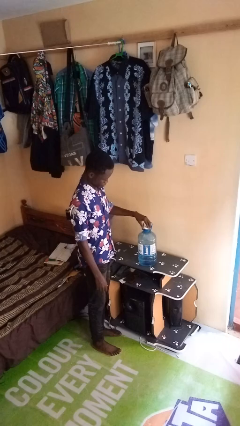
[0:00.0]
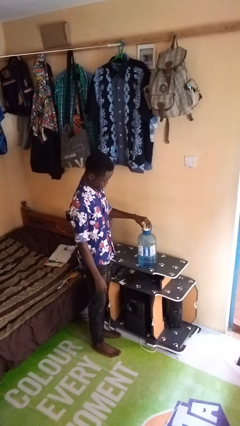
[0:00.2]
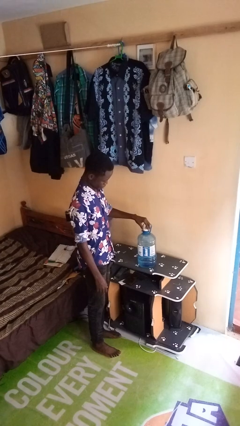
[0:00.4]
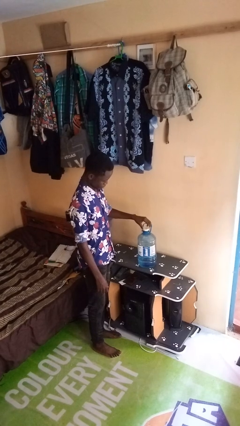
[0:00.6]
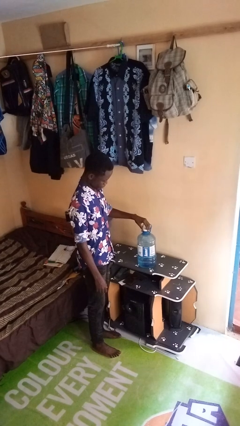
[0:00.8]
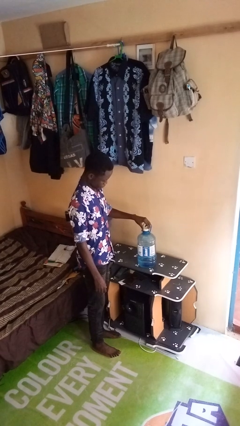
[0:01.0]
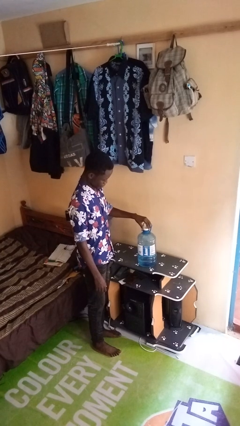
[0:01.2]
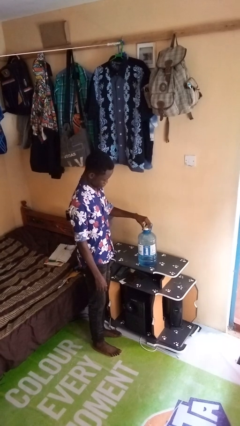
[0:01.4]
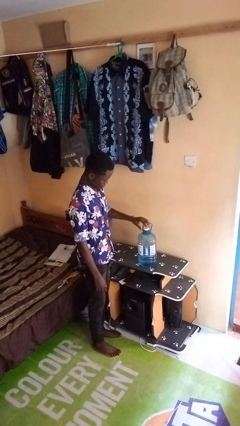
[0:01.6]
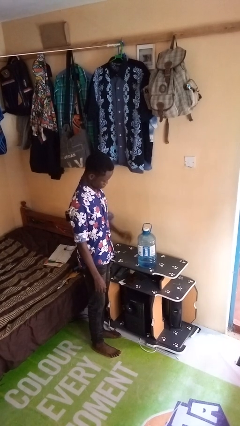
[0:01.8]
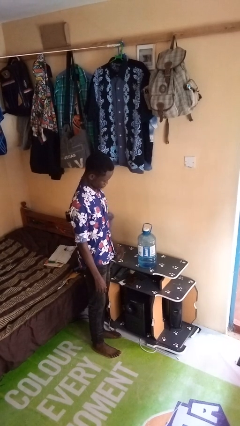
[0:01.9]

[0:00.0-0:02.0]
person screws lid to bottle

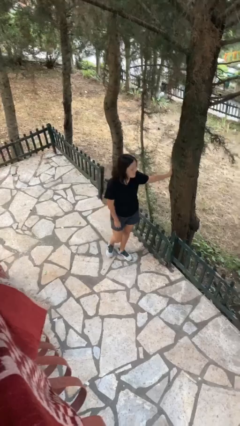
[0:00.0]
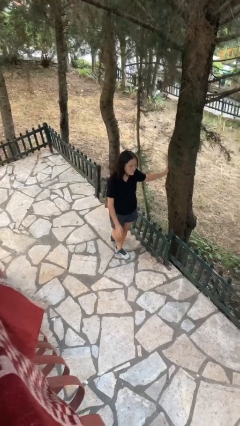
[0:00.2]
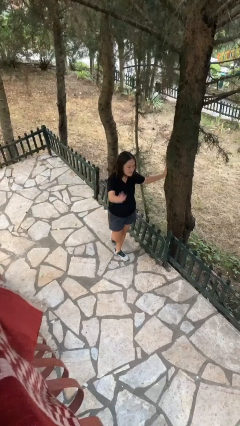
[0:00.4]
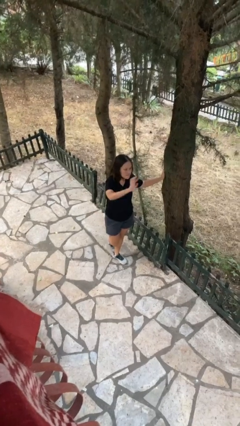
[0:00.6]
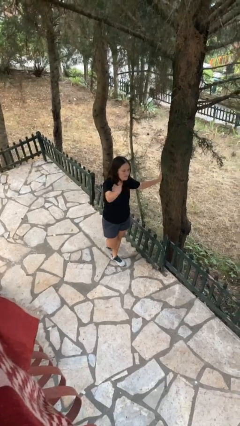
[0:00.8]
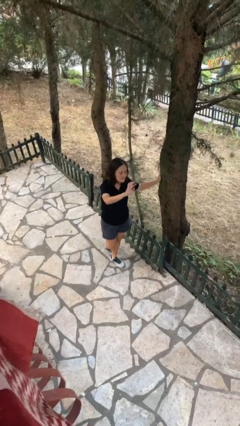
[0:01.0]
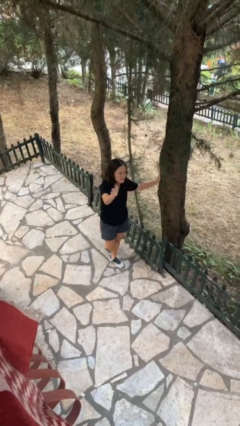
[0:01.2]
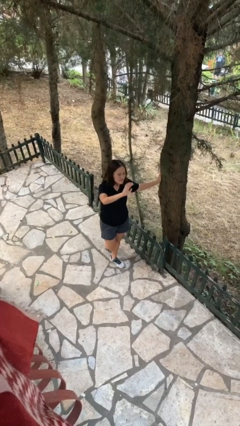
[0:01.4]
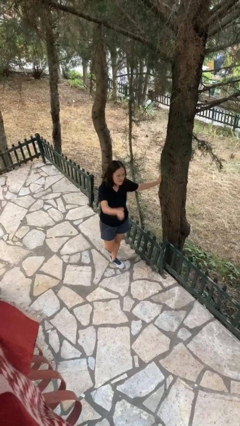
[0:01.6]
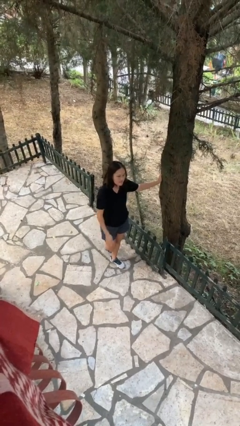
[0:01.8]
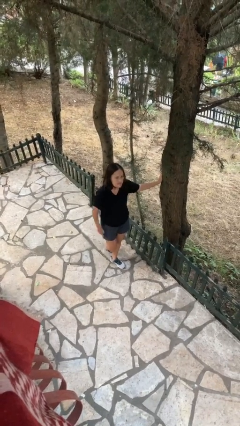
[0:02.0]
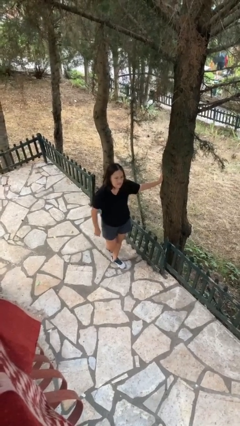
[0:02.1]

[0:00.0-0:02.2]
person waves at person

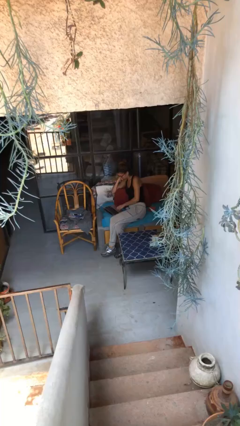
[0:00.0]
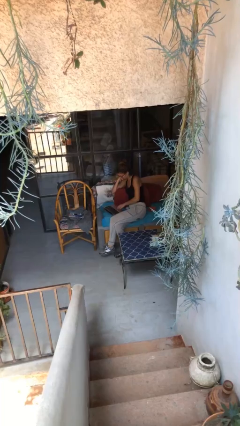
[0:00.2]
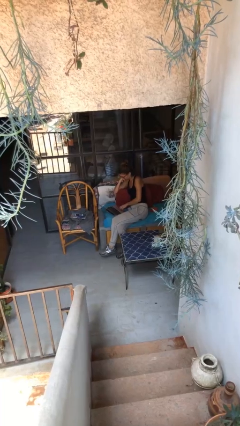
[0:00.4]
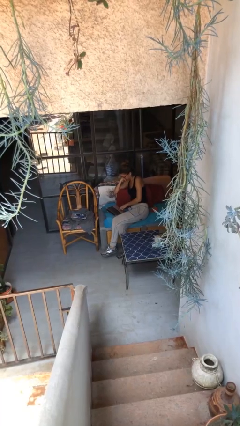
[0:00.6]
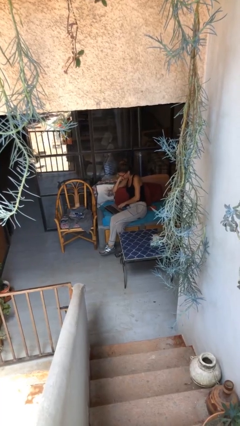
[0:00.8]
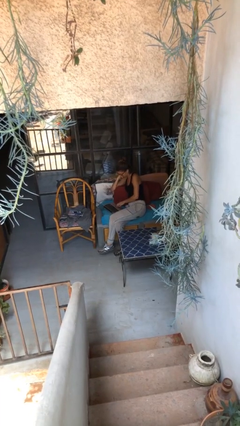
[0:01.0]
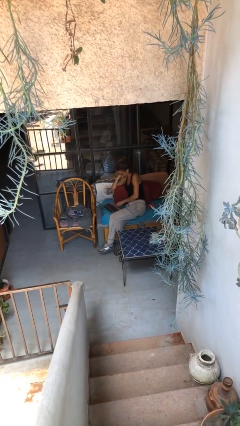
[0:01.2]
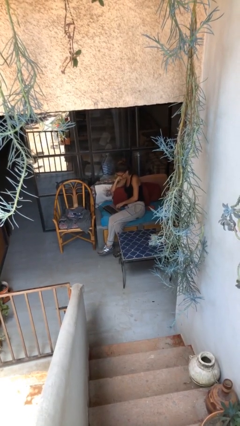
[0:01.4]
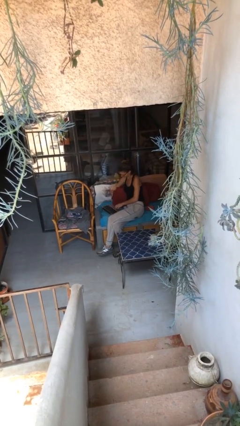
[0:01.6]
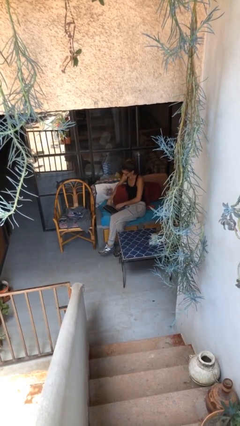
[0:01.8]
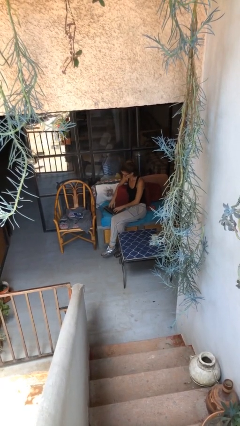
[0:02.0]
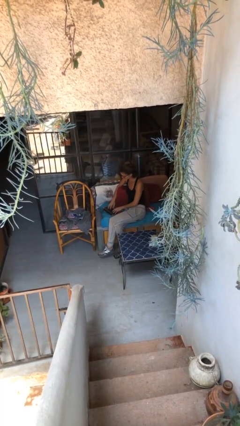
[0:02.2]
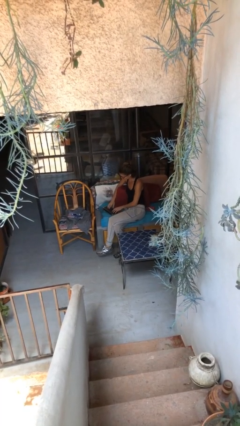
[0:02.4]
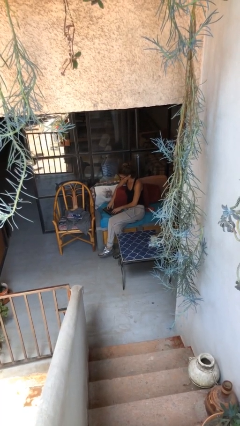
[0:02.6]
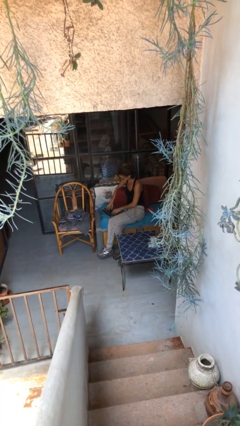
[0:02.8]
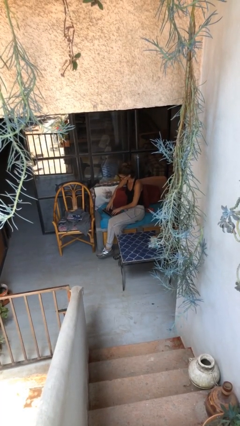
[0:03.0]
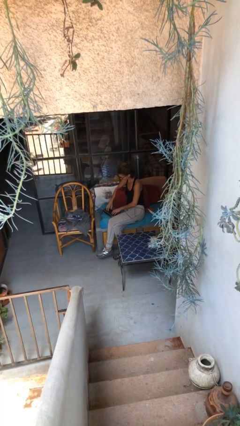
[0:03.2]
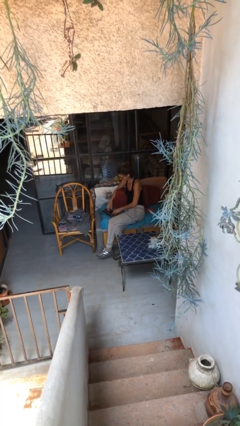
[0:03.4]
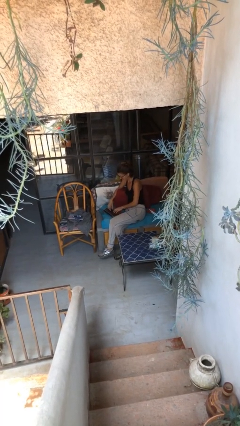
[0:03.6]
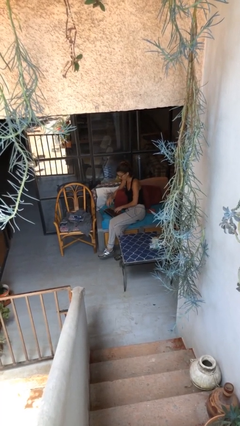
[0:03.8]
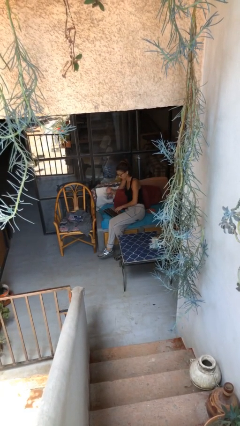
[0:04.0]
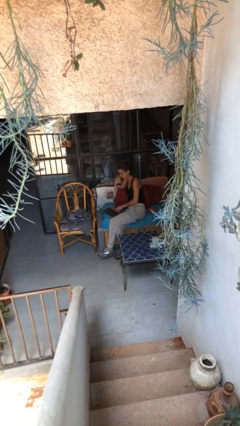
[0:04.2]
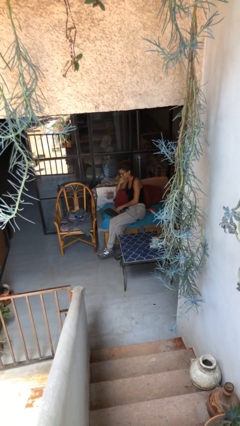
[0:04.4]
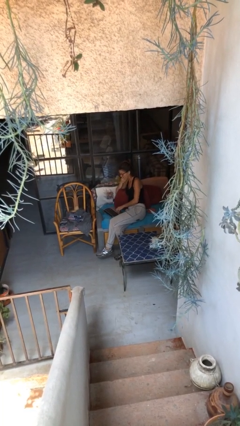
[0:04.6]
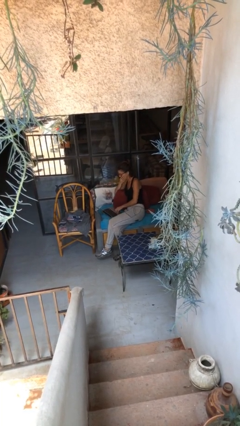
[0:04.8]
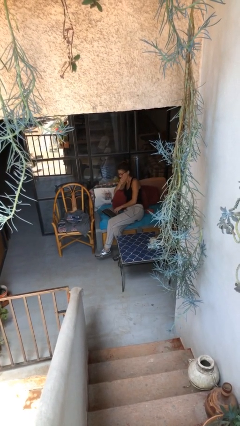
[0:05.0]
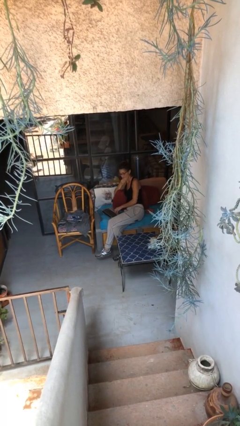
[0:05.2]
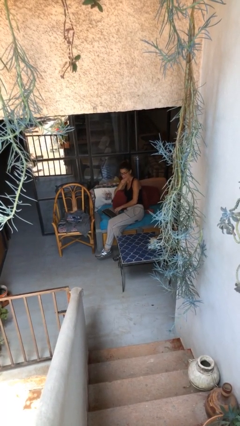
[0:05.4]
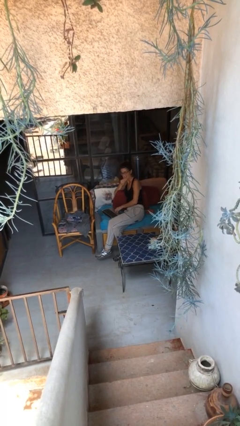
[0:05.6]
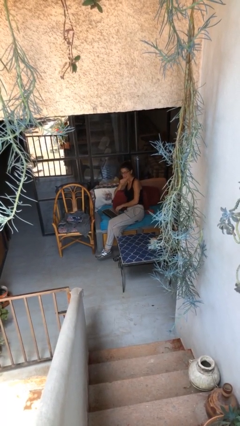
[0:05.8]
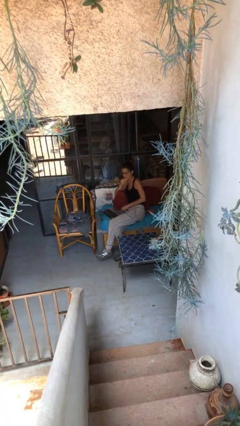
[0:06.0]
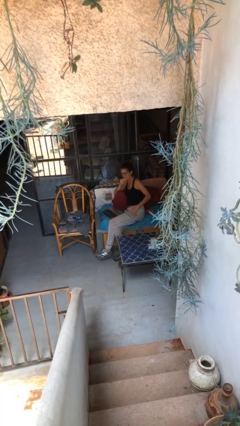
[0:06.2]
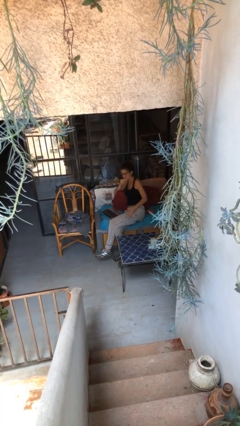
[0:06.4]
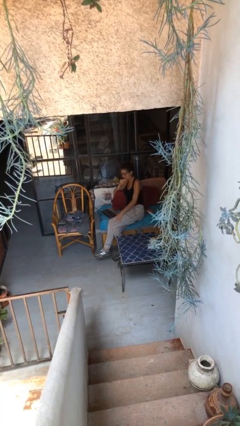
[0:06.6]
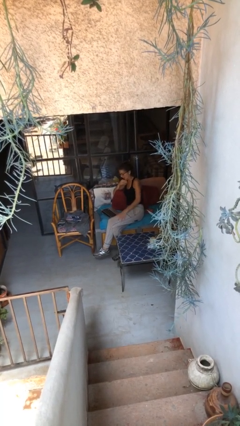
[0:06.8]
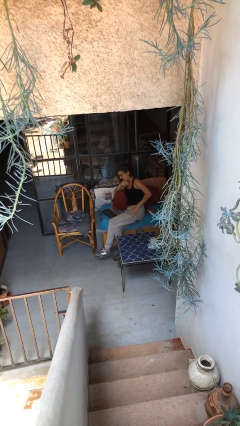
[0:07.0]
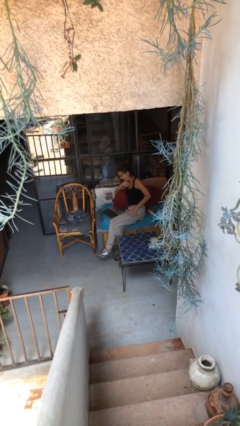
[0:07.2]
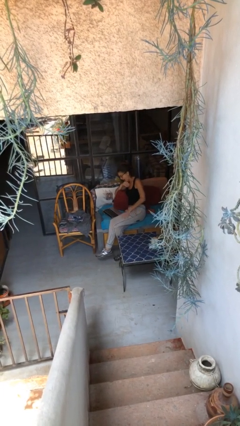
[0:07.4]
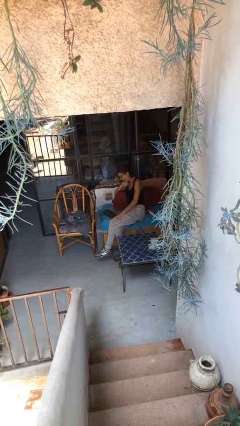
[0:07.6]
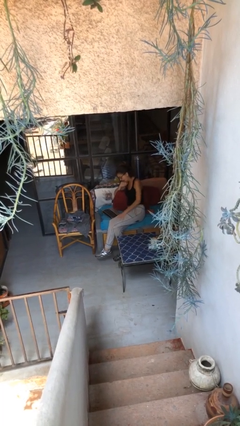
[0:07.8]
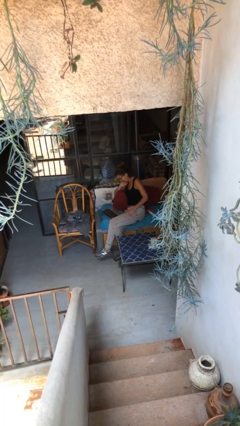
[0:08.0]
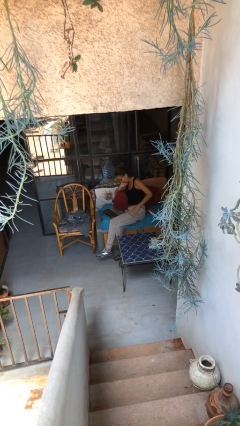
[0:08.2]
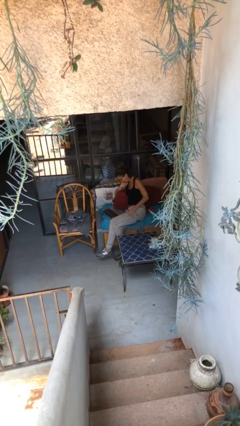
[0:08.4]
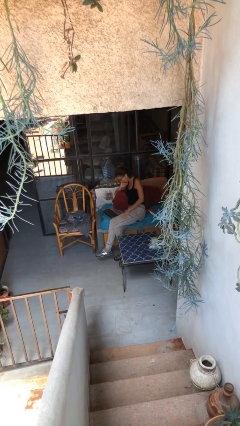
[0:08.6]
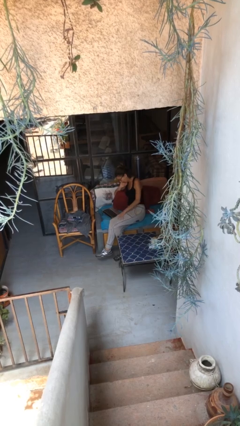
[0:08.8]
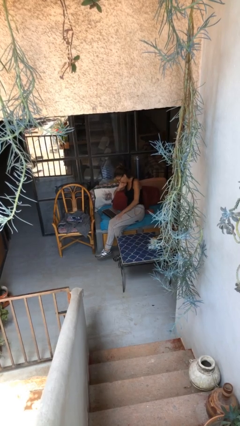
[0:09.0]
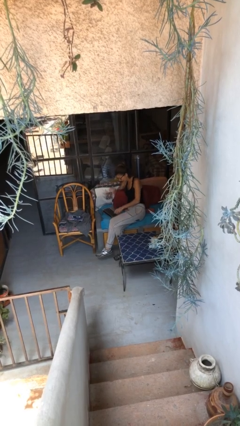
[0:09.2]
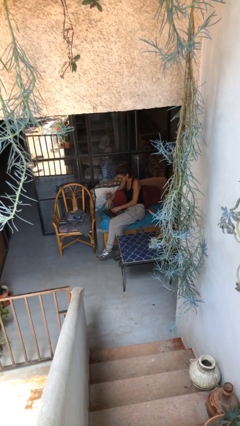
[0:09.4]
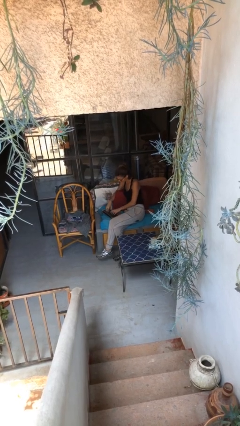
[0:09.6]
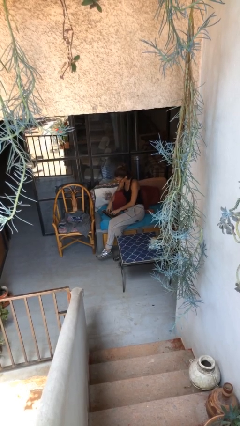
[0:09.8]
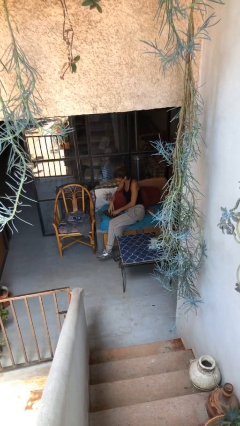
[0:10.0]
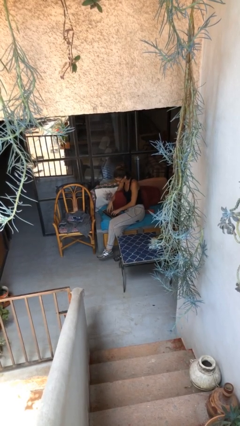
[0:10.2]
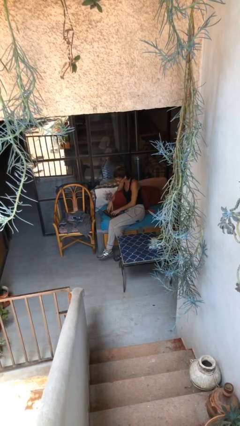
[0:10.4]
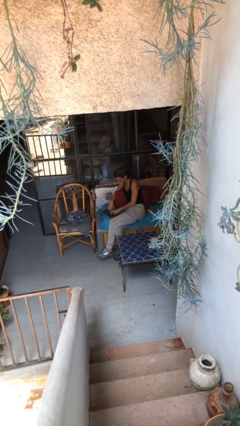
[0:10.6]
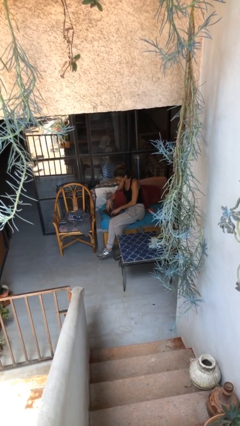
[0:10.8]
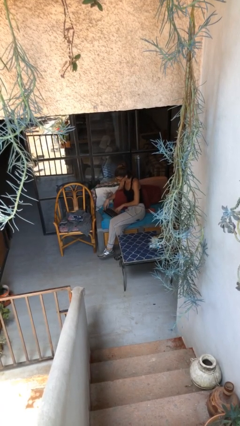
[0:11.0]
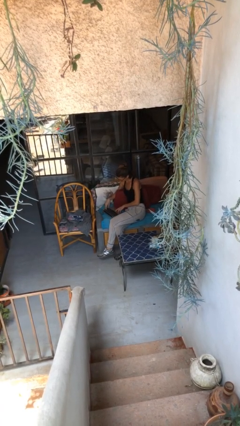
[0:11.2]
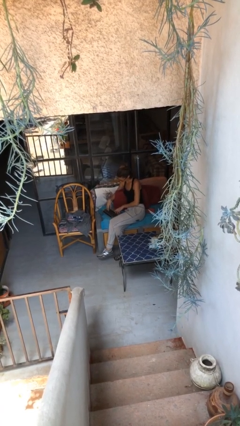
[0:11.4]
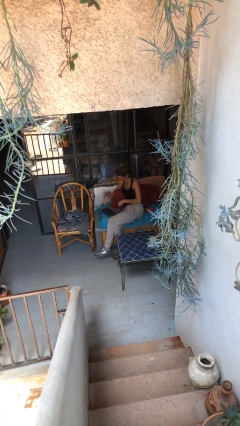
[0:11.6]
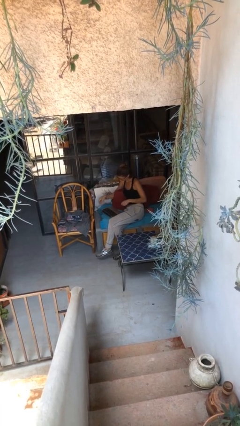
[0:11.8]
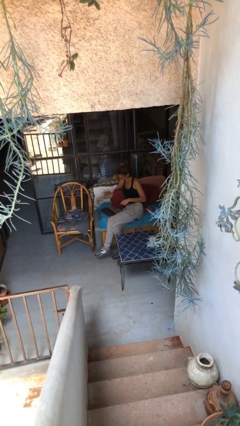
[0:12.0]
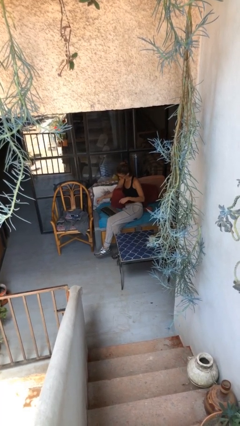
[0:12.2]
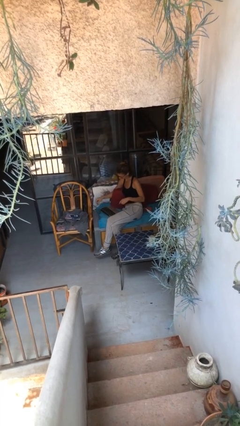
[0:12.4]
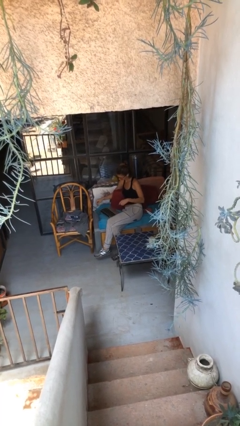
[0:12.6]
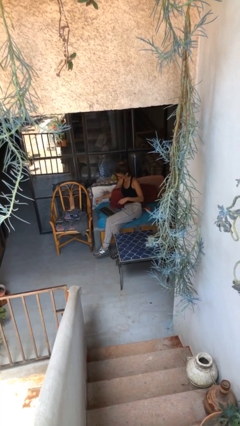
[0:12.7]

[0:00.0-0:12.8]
person interacts with laptop

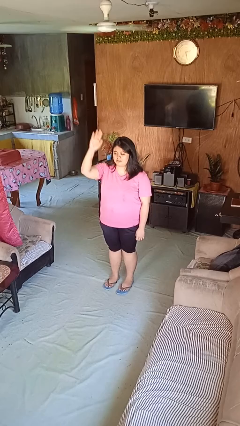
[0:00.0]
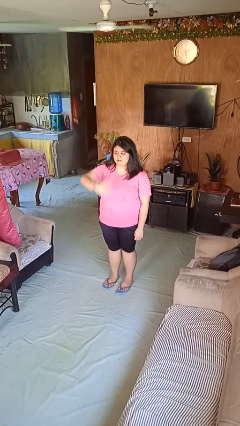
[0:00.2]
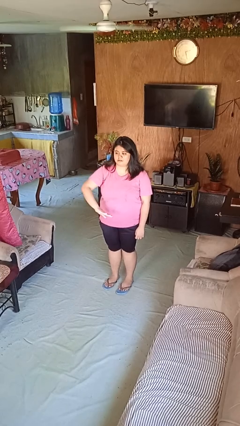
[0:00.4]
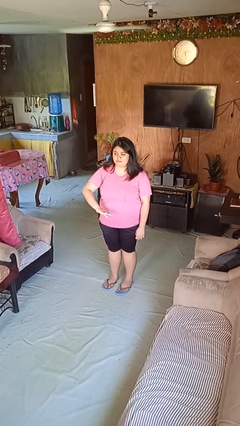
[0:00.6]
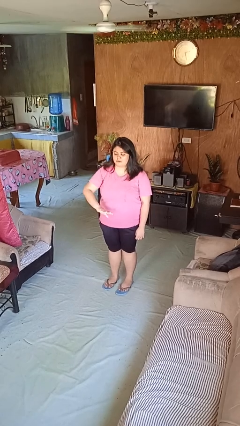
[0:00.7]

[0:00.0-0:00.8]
person gestures swipe down

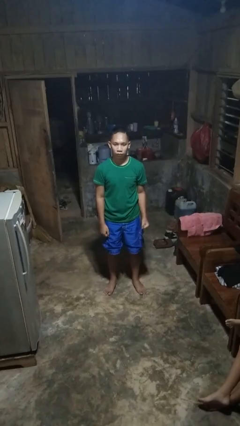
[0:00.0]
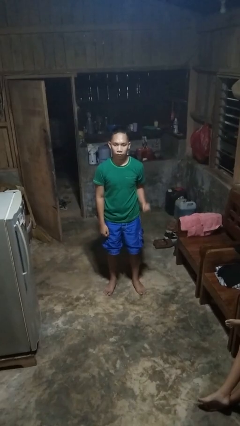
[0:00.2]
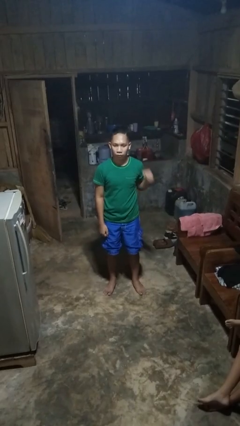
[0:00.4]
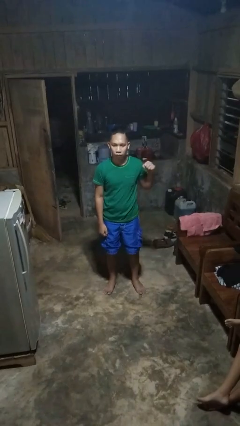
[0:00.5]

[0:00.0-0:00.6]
person punches
